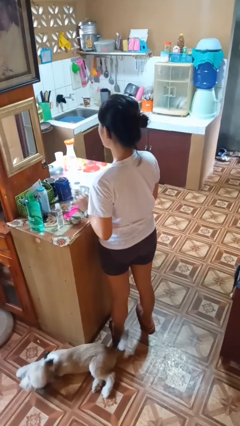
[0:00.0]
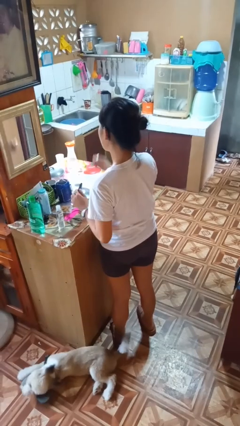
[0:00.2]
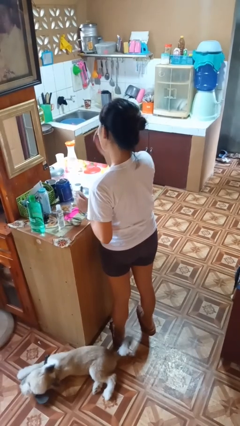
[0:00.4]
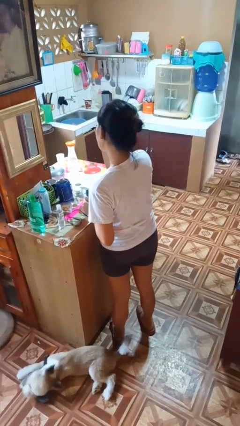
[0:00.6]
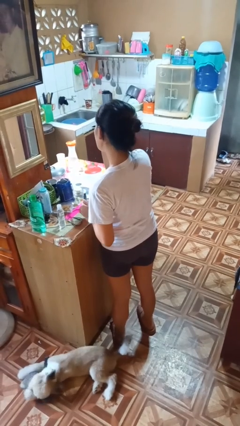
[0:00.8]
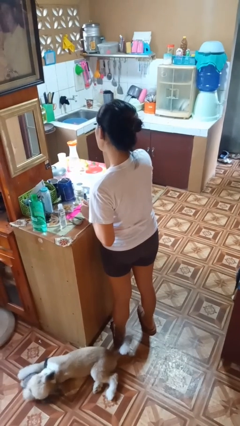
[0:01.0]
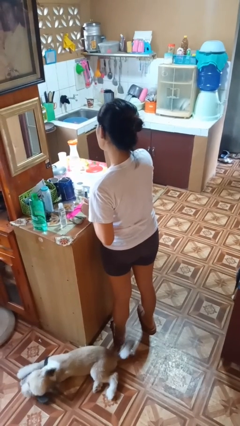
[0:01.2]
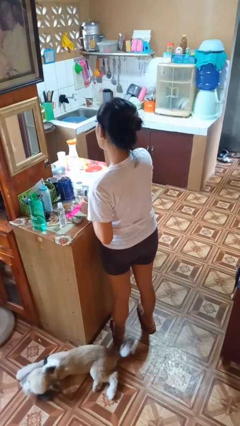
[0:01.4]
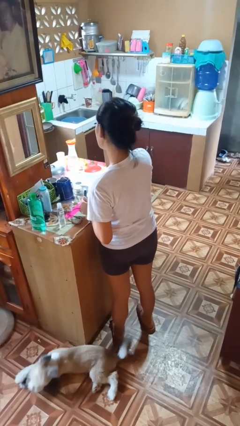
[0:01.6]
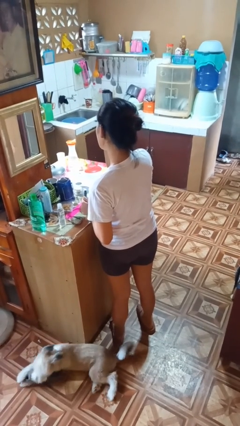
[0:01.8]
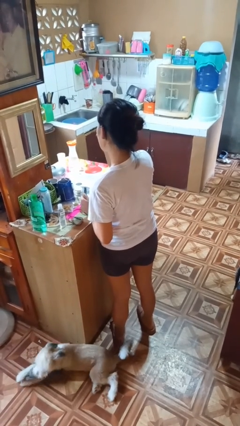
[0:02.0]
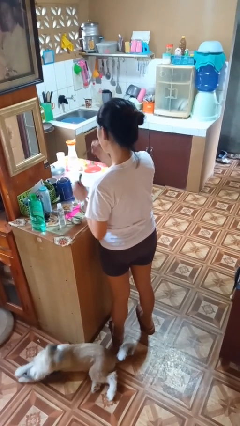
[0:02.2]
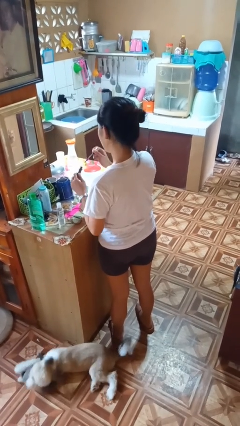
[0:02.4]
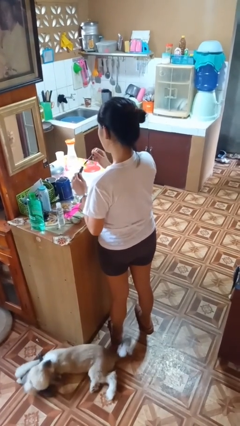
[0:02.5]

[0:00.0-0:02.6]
person applies eye makeup

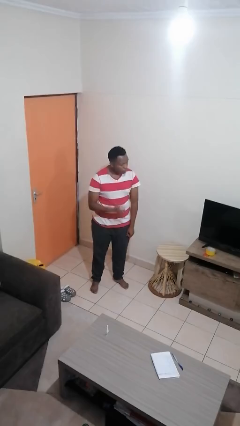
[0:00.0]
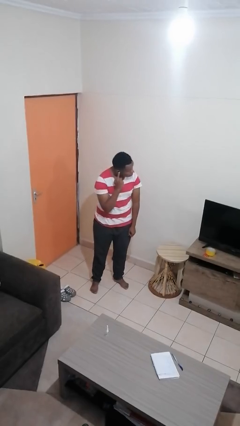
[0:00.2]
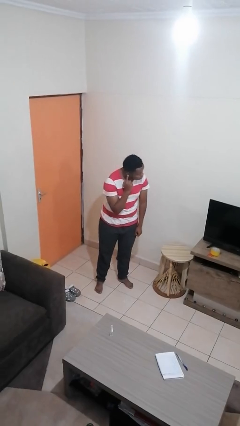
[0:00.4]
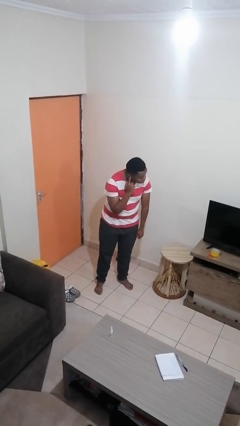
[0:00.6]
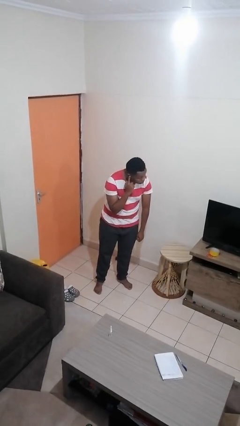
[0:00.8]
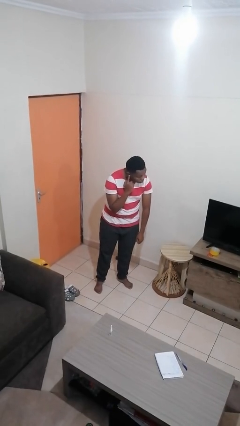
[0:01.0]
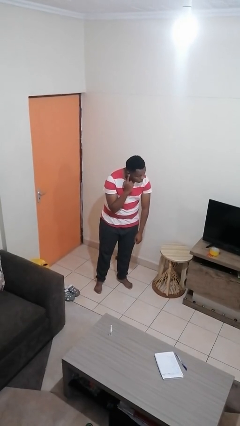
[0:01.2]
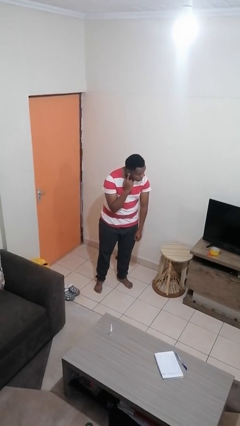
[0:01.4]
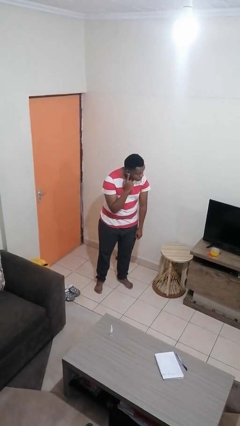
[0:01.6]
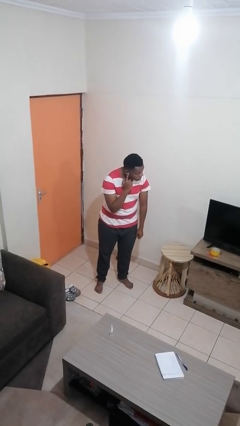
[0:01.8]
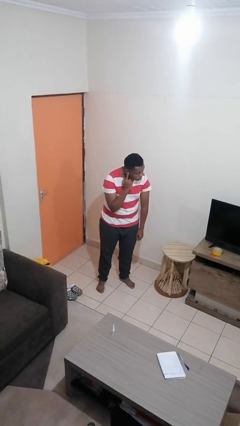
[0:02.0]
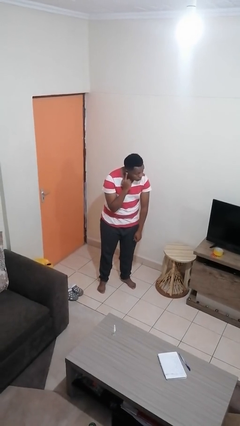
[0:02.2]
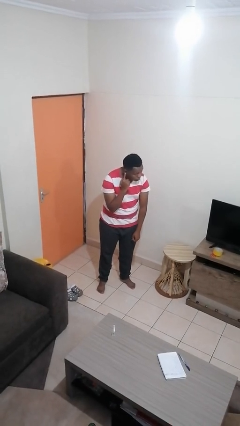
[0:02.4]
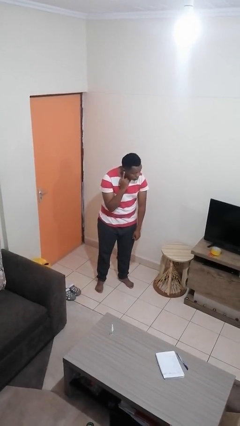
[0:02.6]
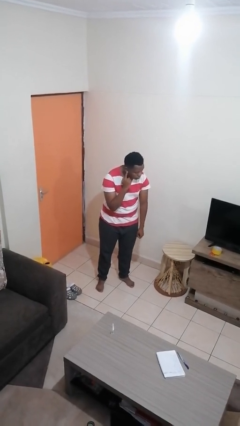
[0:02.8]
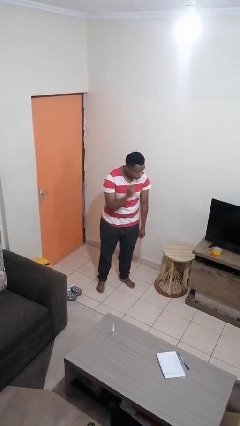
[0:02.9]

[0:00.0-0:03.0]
person gestures listen closely

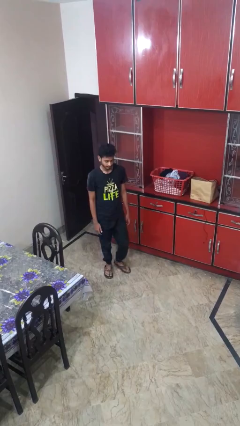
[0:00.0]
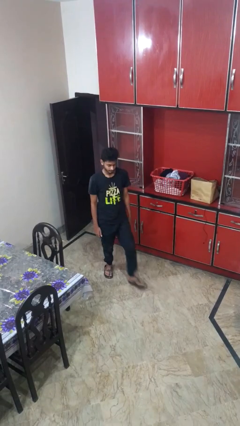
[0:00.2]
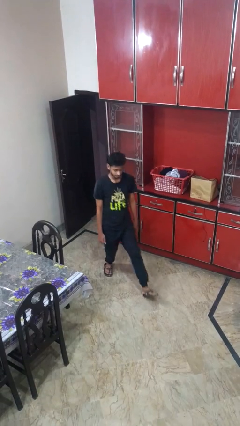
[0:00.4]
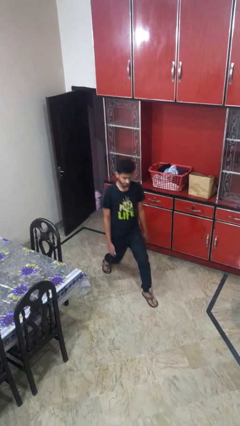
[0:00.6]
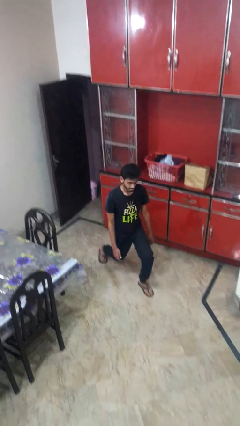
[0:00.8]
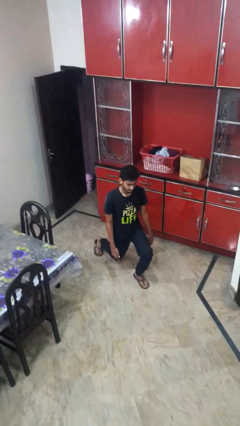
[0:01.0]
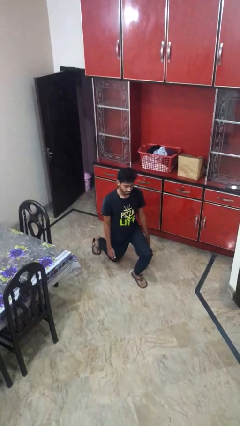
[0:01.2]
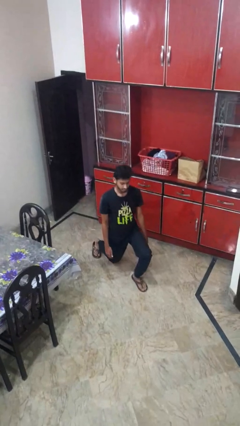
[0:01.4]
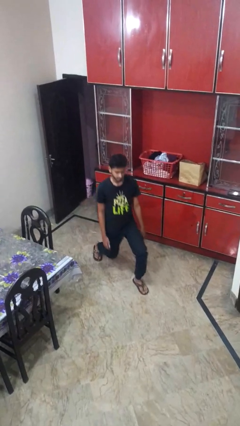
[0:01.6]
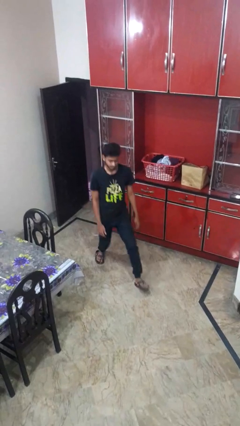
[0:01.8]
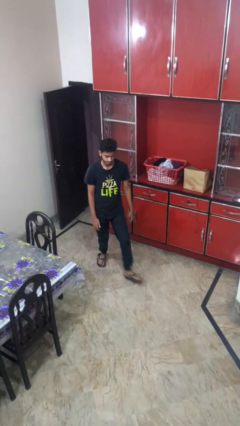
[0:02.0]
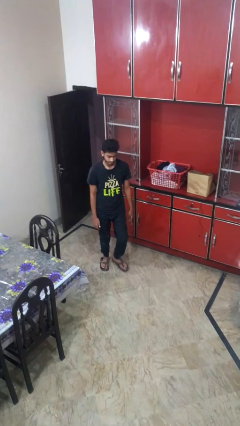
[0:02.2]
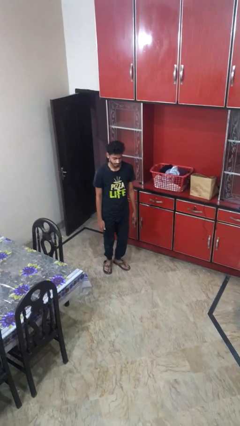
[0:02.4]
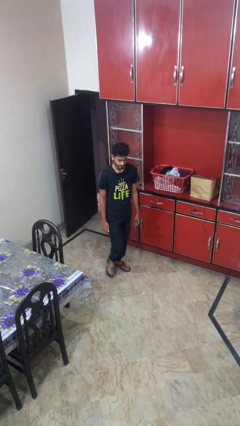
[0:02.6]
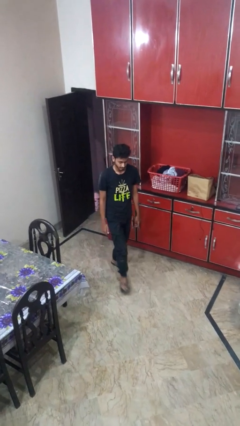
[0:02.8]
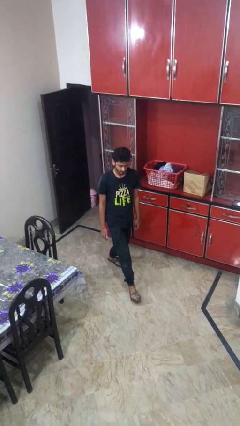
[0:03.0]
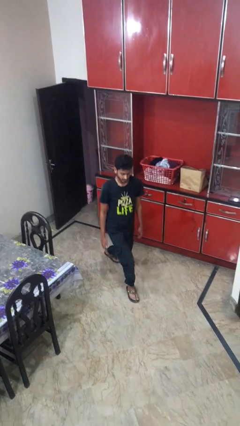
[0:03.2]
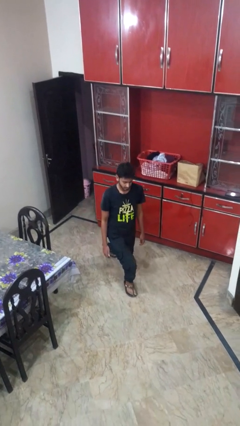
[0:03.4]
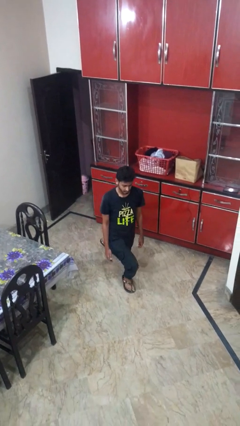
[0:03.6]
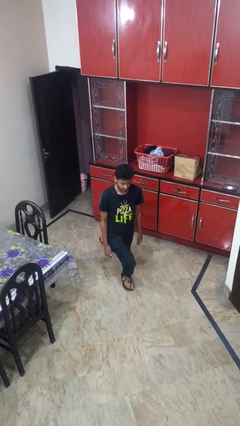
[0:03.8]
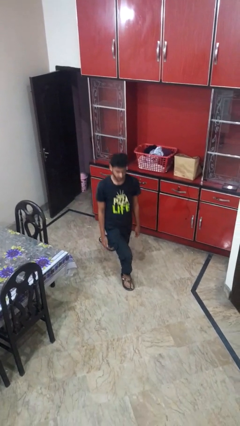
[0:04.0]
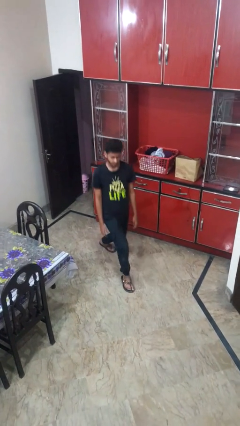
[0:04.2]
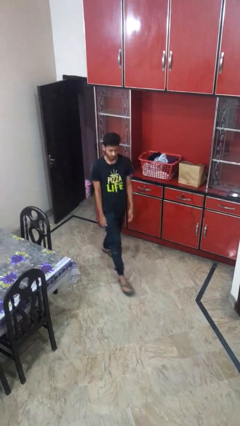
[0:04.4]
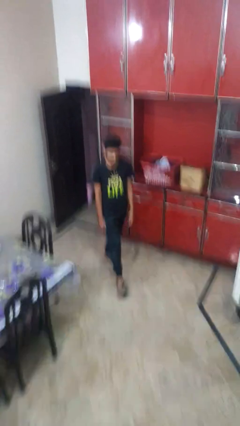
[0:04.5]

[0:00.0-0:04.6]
person exercises with lunges

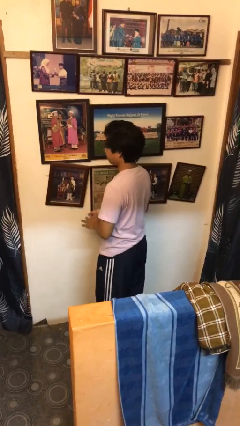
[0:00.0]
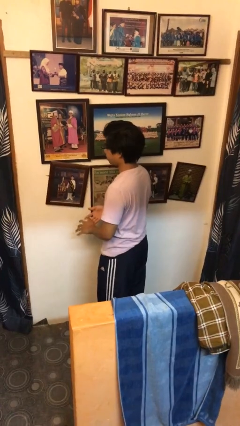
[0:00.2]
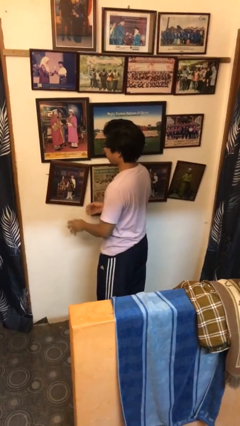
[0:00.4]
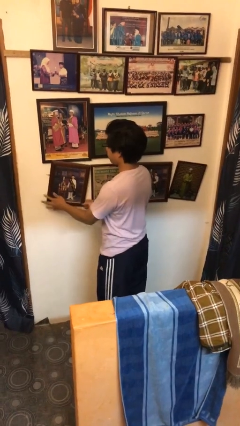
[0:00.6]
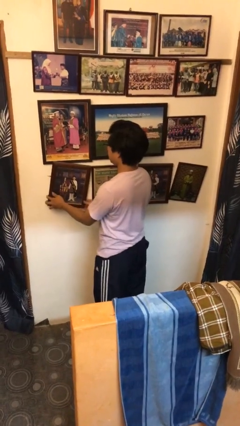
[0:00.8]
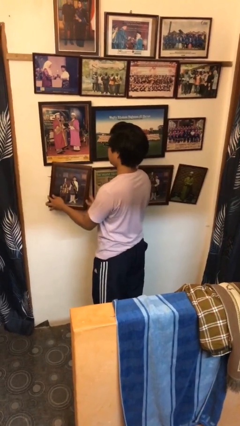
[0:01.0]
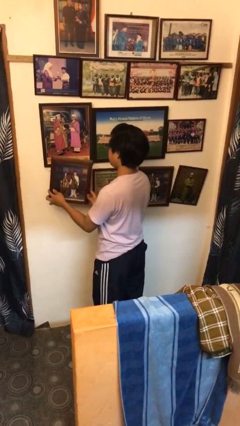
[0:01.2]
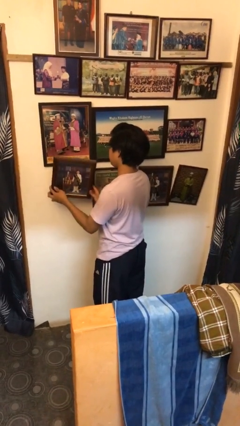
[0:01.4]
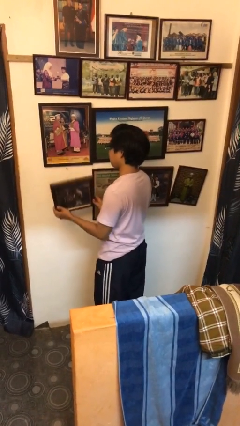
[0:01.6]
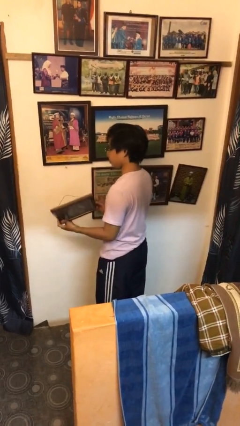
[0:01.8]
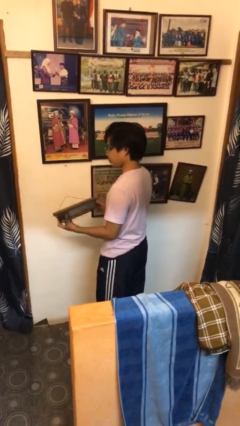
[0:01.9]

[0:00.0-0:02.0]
person takes down picture frame

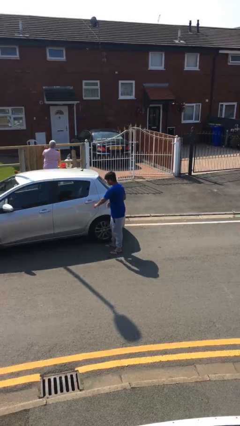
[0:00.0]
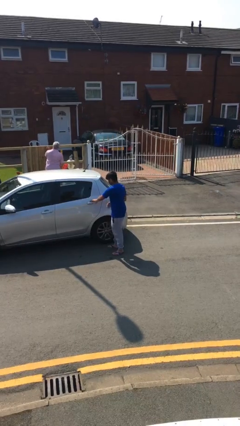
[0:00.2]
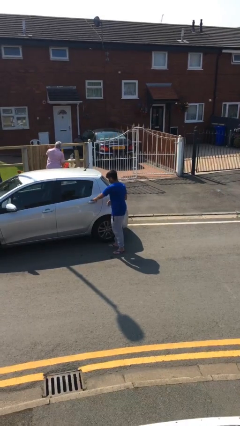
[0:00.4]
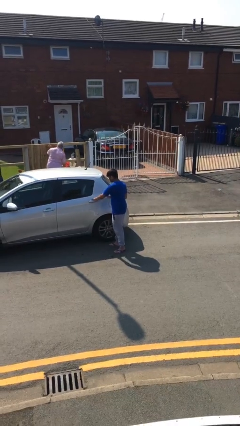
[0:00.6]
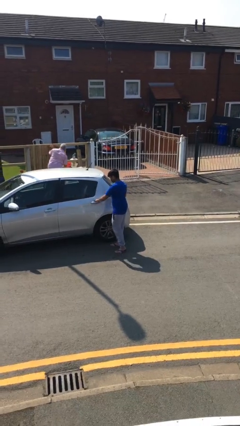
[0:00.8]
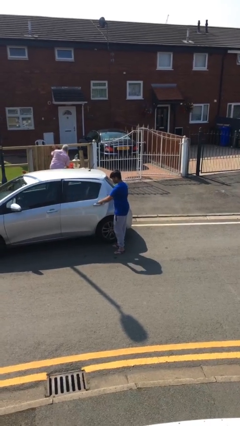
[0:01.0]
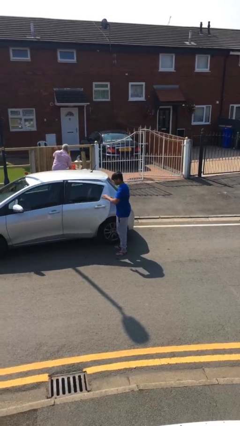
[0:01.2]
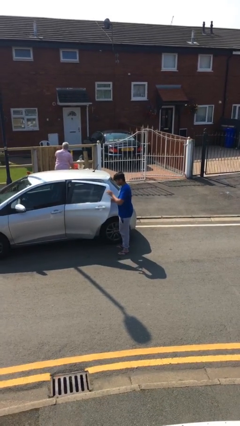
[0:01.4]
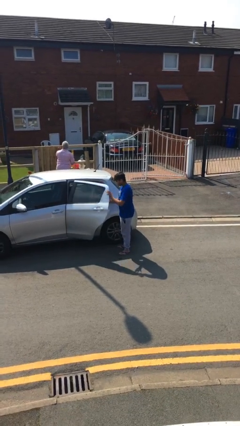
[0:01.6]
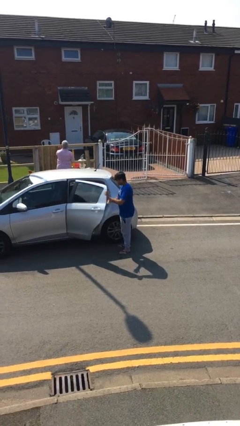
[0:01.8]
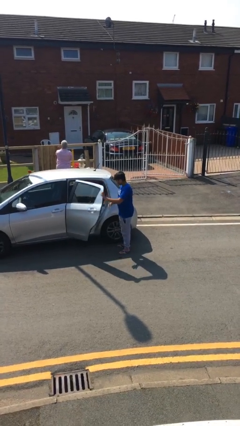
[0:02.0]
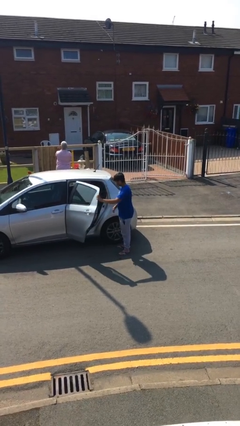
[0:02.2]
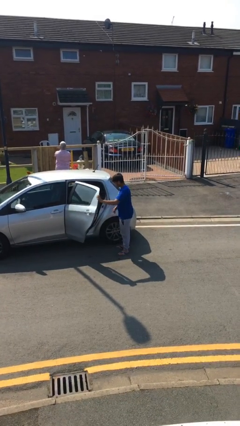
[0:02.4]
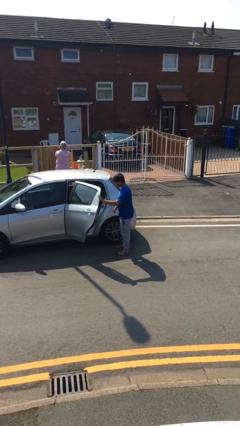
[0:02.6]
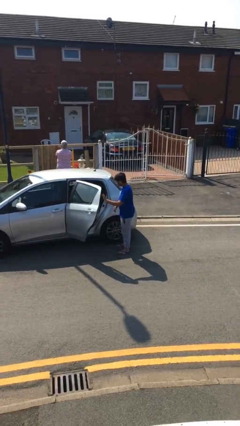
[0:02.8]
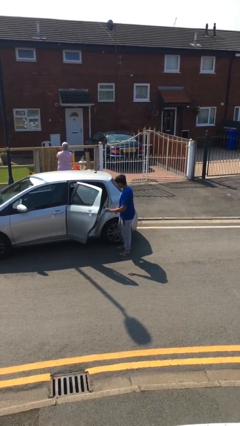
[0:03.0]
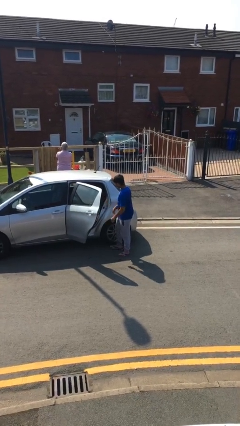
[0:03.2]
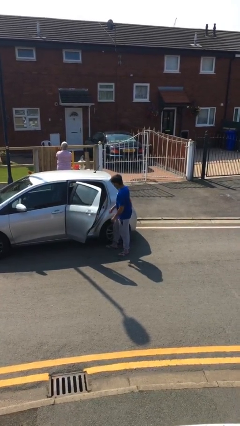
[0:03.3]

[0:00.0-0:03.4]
person opens car door

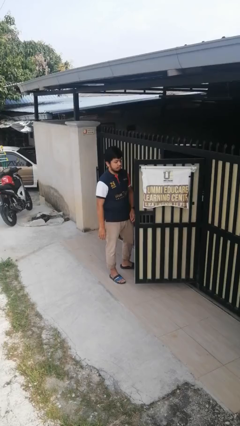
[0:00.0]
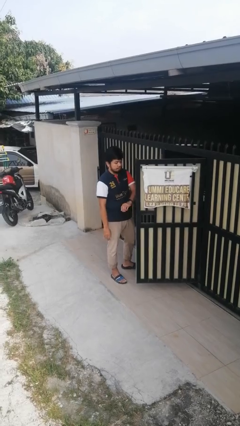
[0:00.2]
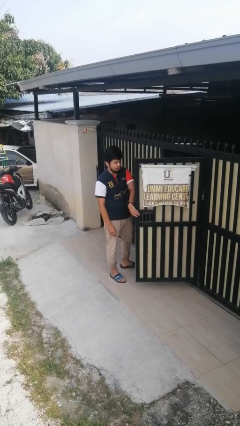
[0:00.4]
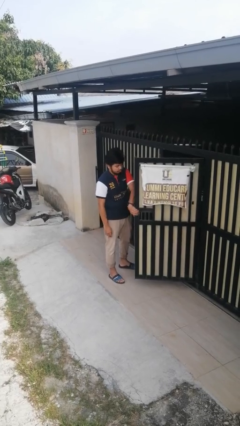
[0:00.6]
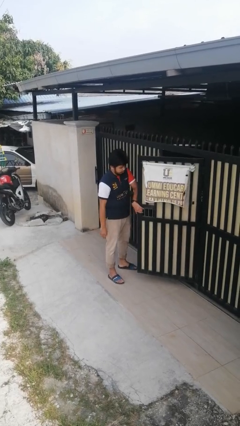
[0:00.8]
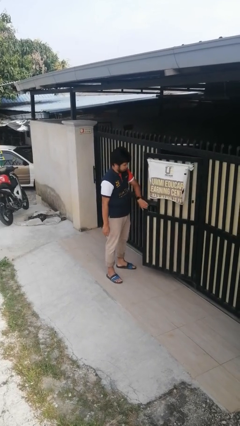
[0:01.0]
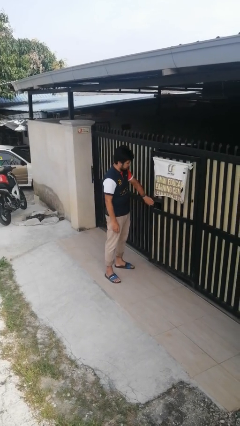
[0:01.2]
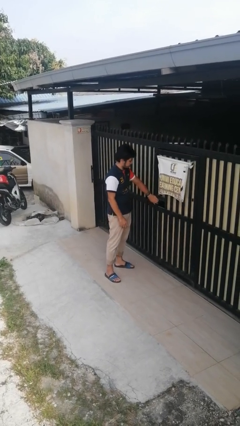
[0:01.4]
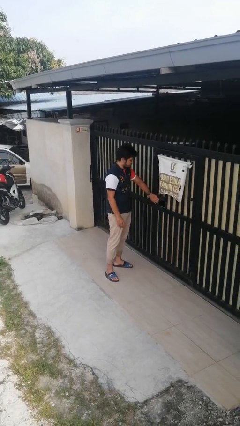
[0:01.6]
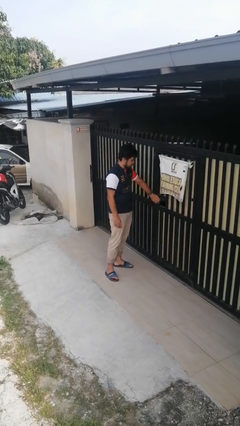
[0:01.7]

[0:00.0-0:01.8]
person closes gate

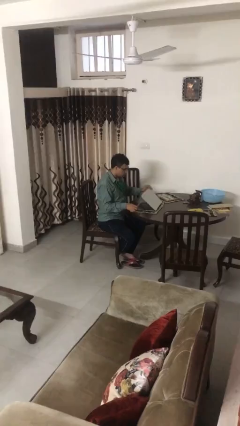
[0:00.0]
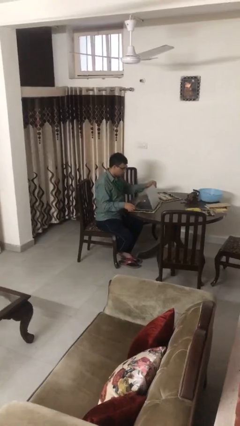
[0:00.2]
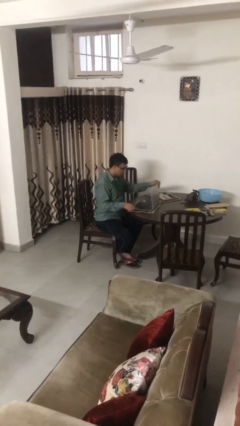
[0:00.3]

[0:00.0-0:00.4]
person interacts with laptop
